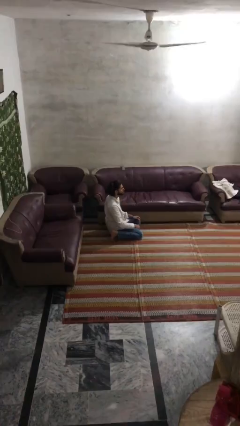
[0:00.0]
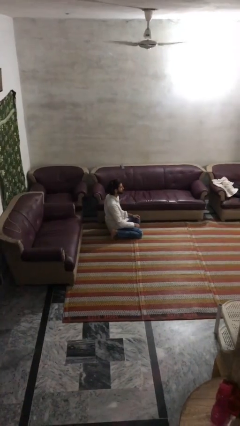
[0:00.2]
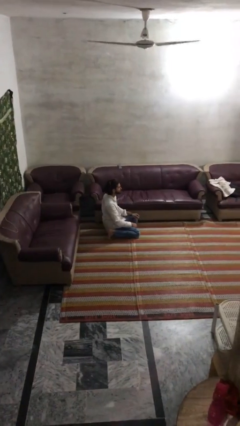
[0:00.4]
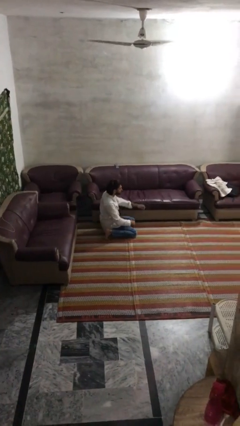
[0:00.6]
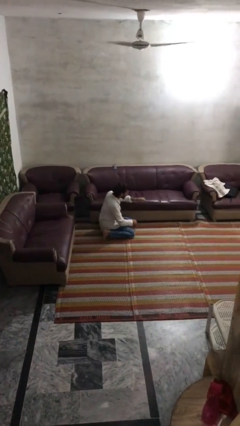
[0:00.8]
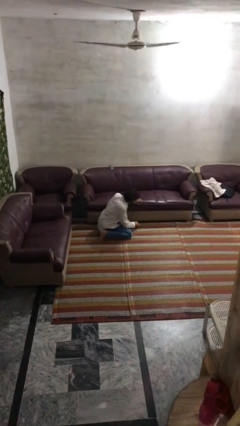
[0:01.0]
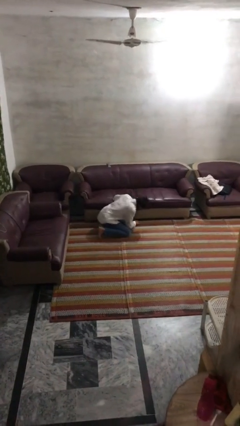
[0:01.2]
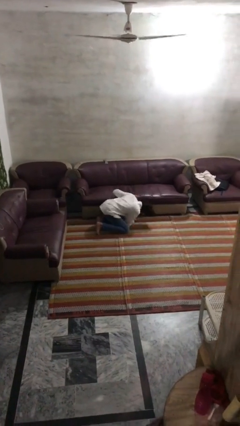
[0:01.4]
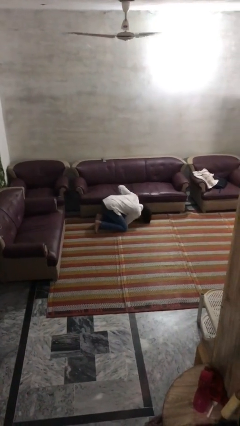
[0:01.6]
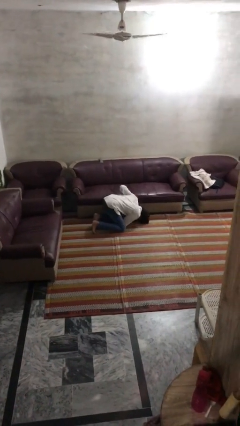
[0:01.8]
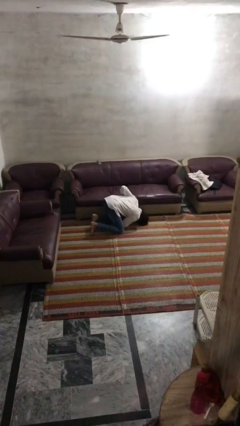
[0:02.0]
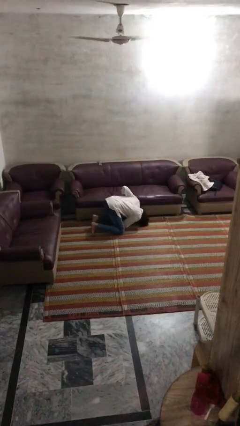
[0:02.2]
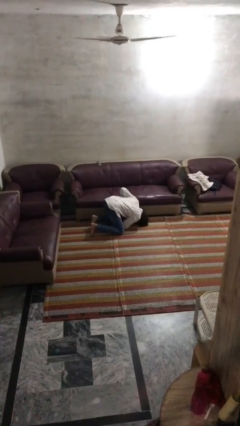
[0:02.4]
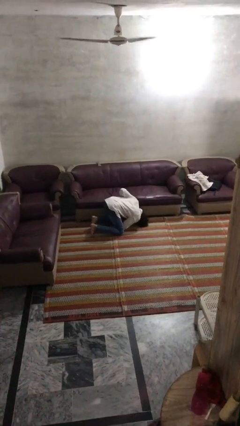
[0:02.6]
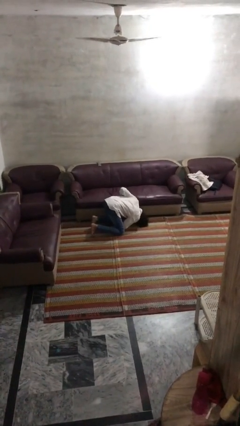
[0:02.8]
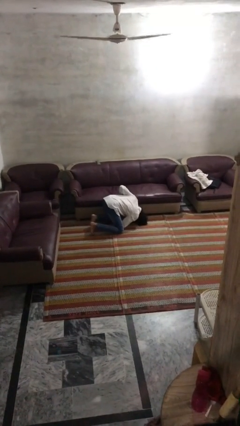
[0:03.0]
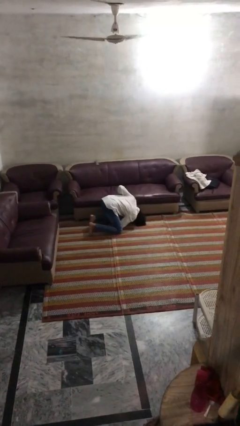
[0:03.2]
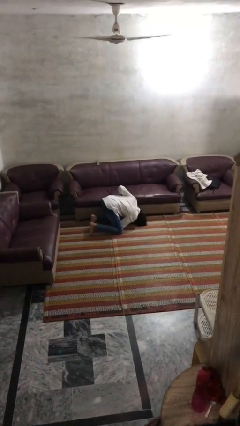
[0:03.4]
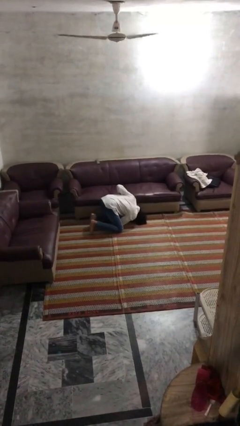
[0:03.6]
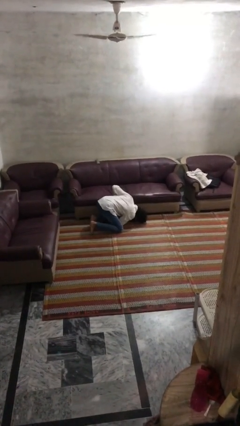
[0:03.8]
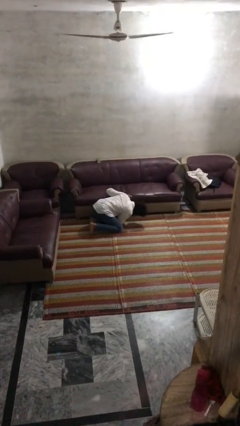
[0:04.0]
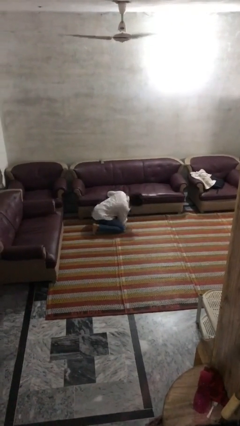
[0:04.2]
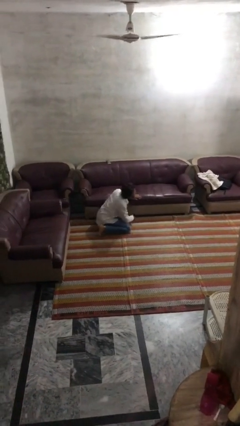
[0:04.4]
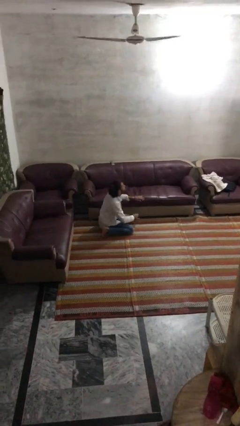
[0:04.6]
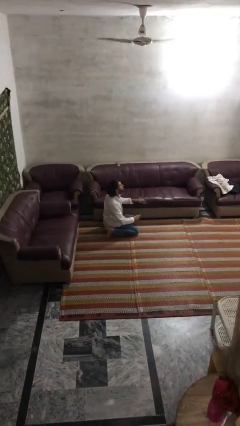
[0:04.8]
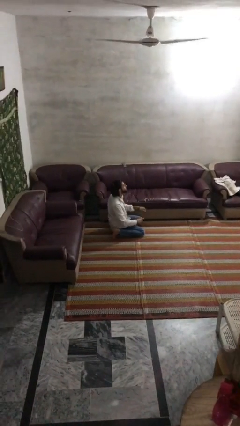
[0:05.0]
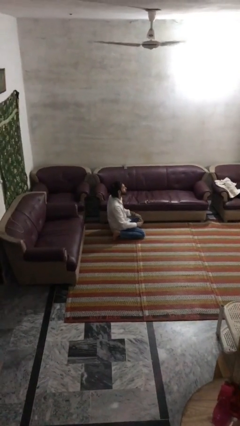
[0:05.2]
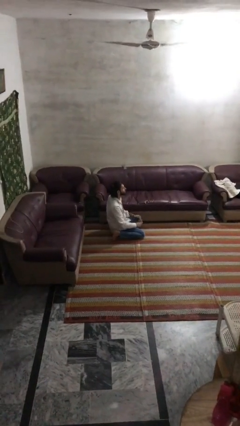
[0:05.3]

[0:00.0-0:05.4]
person searches under couch

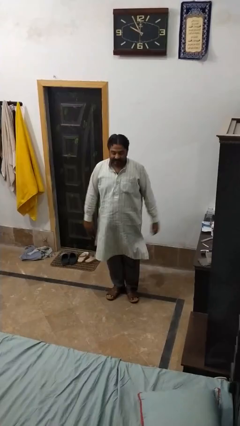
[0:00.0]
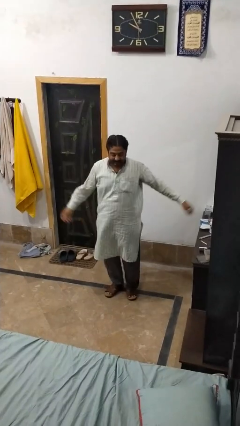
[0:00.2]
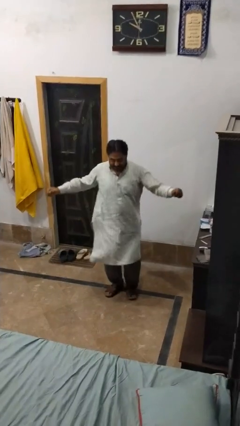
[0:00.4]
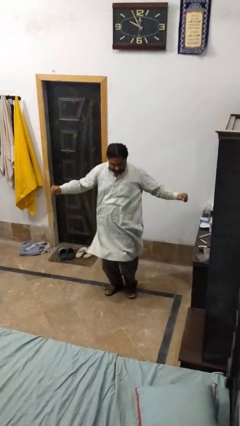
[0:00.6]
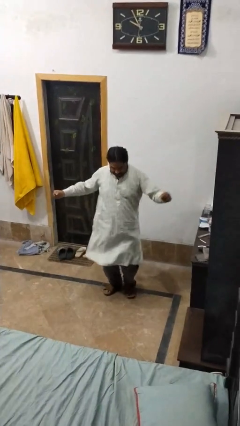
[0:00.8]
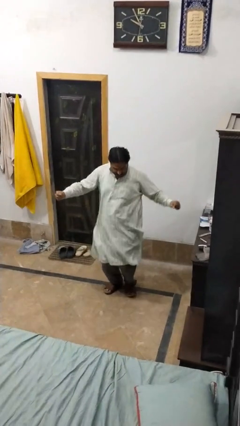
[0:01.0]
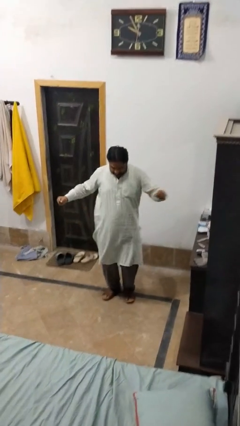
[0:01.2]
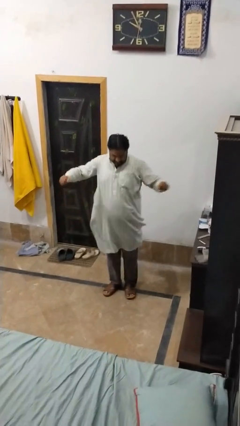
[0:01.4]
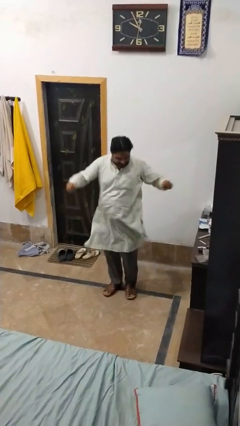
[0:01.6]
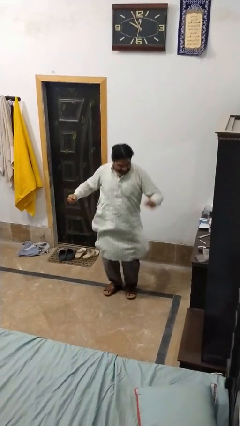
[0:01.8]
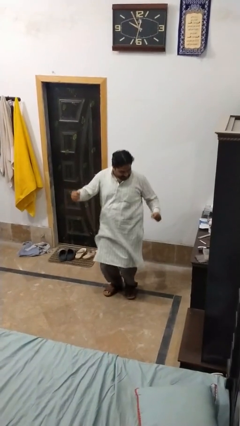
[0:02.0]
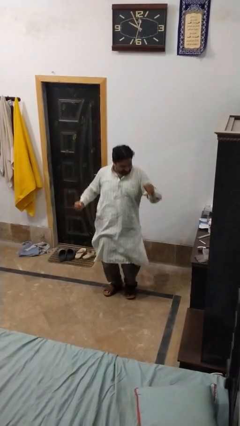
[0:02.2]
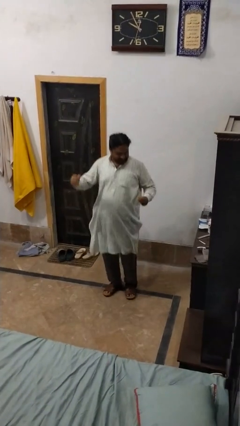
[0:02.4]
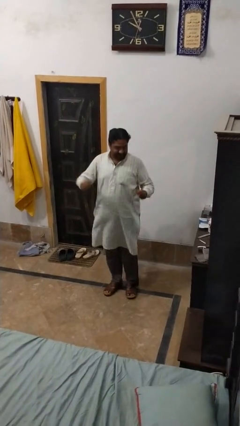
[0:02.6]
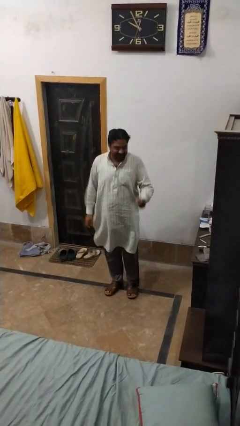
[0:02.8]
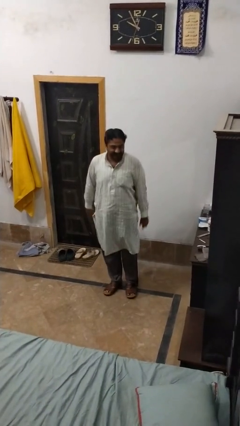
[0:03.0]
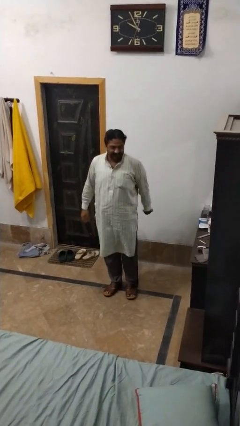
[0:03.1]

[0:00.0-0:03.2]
person dances in place

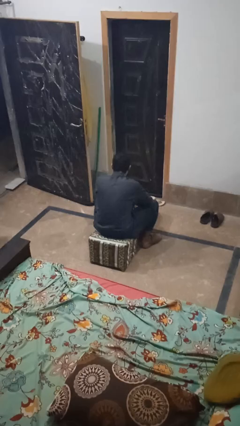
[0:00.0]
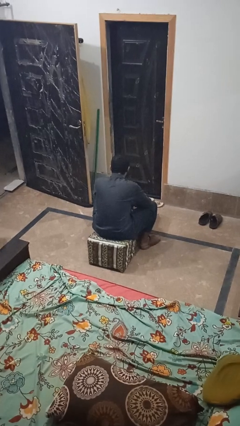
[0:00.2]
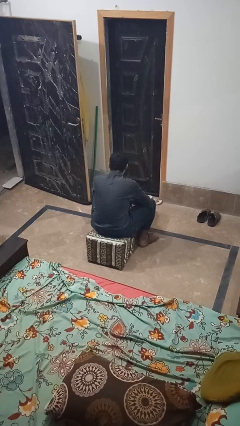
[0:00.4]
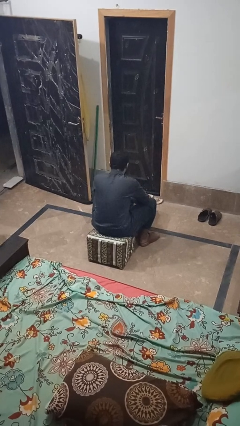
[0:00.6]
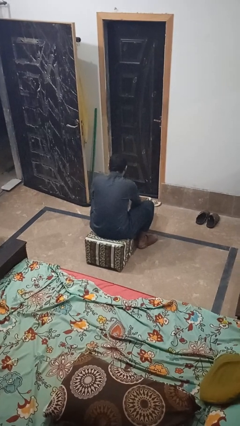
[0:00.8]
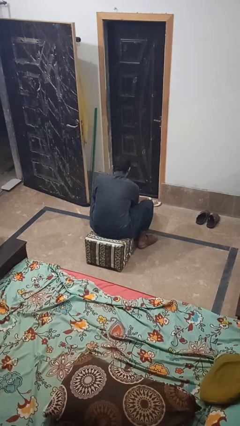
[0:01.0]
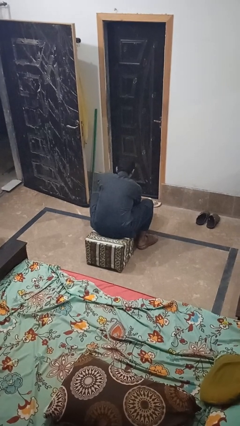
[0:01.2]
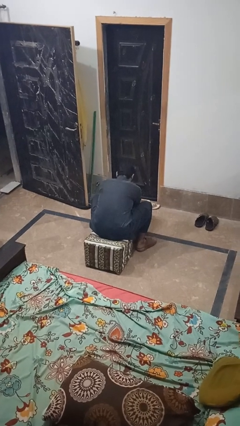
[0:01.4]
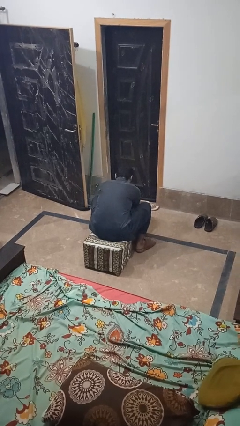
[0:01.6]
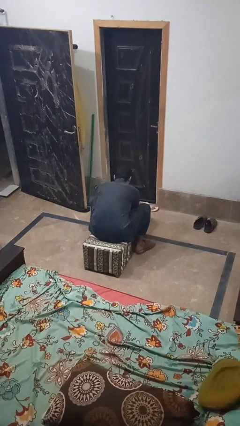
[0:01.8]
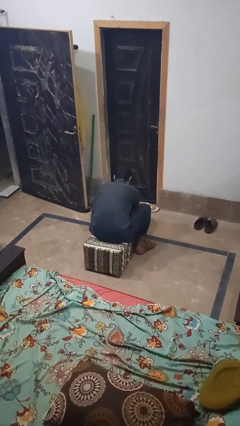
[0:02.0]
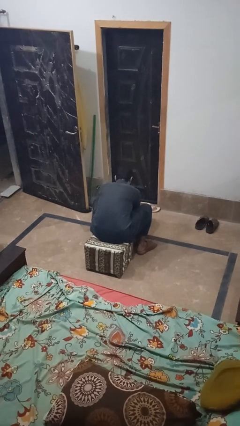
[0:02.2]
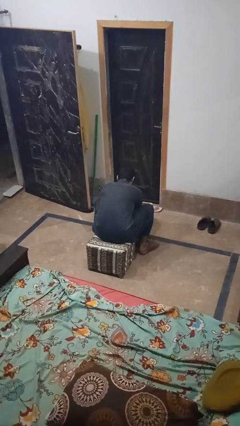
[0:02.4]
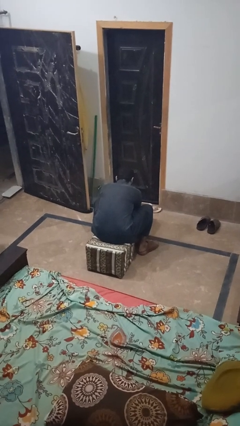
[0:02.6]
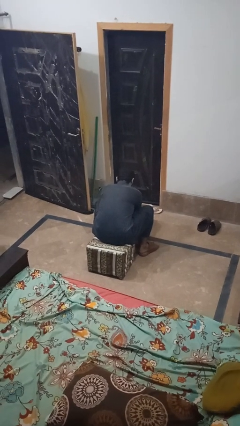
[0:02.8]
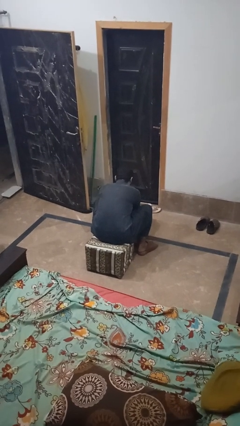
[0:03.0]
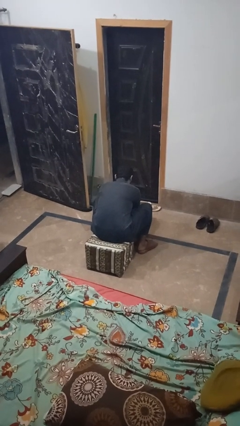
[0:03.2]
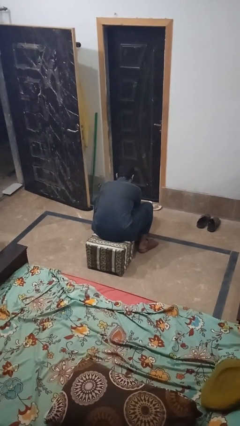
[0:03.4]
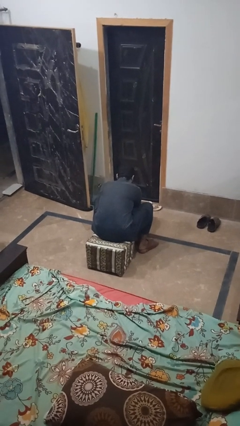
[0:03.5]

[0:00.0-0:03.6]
person searches in box

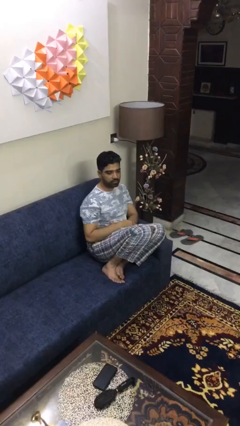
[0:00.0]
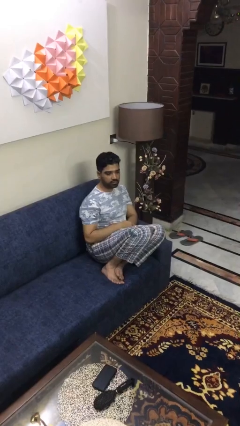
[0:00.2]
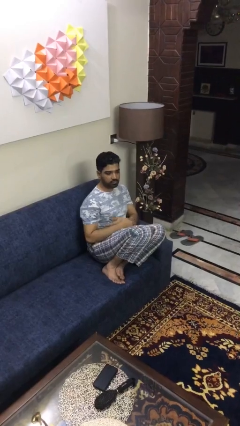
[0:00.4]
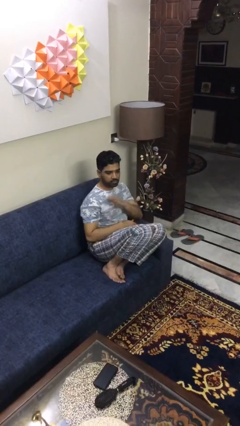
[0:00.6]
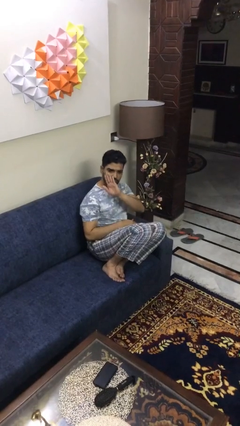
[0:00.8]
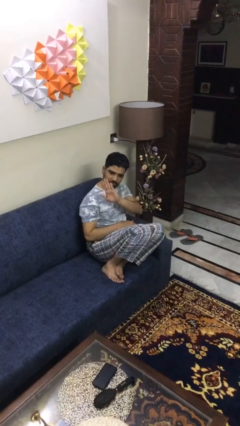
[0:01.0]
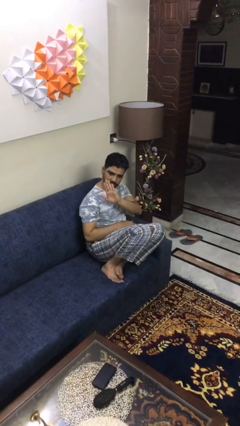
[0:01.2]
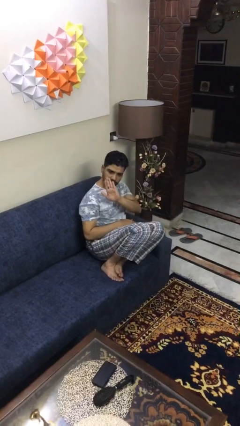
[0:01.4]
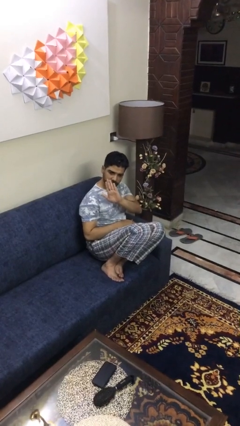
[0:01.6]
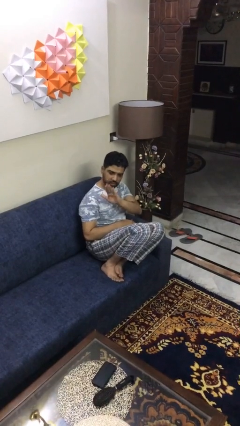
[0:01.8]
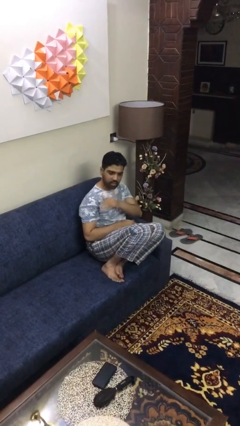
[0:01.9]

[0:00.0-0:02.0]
person gestures stop

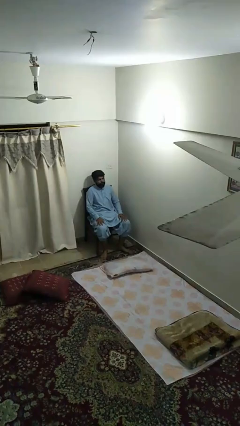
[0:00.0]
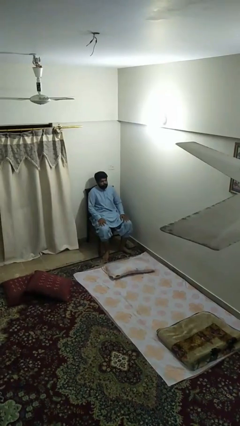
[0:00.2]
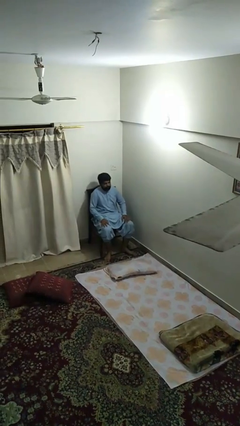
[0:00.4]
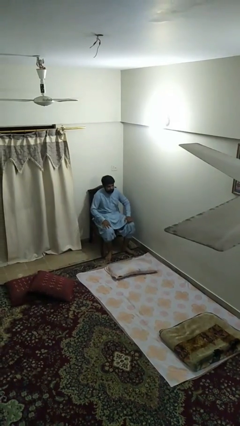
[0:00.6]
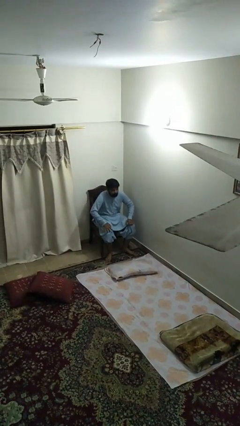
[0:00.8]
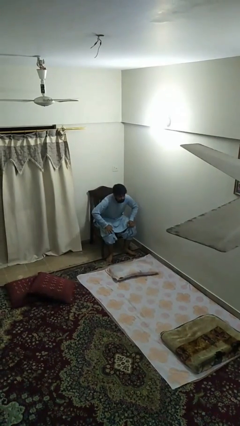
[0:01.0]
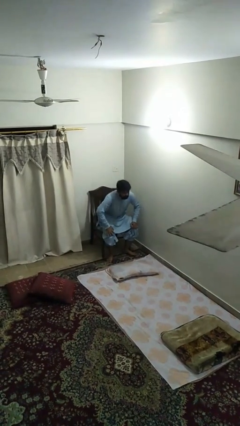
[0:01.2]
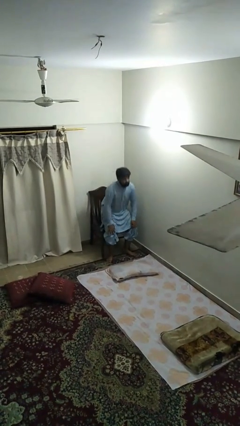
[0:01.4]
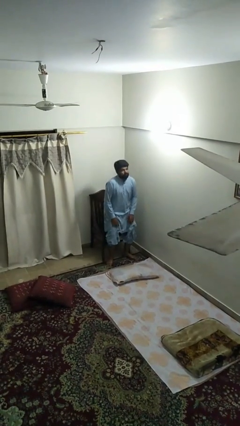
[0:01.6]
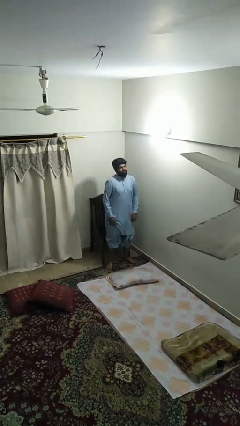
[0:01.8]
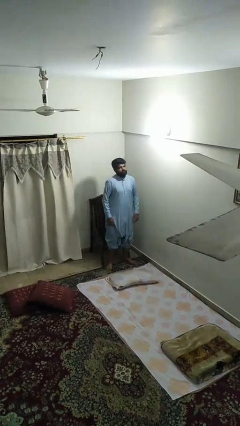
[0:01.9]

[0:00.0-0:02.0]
person stands up

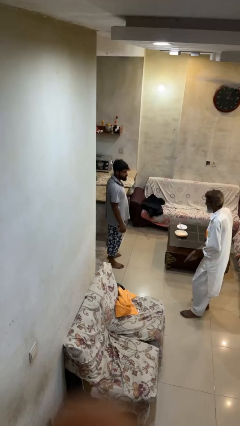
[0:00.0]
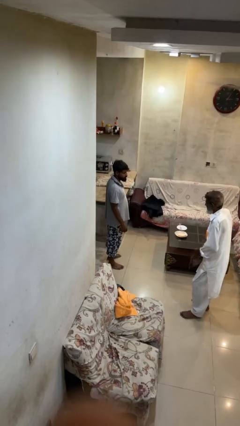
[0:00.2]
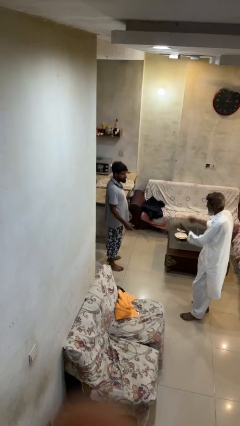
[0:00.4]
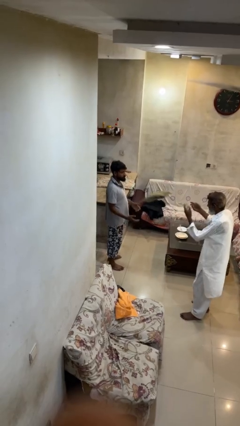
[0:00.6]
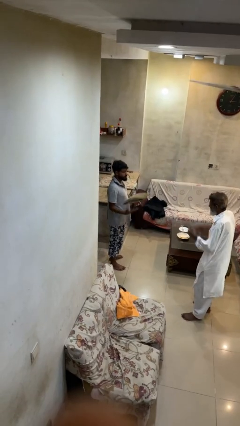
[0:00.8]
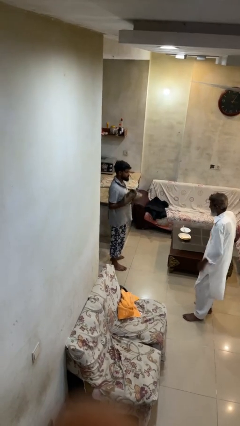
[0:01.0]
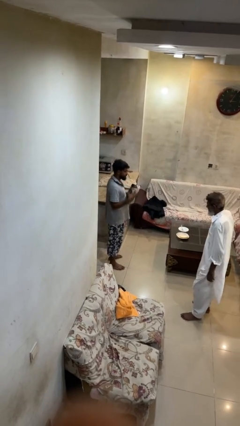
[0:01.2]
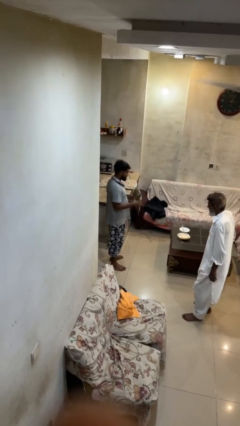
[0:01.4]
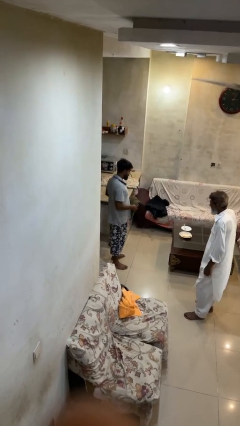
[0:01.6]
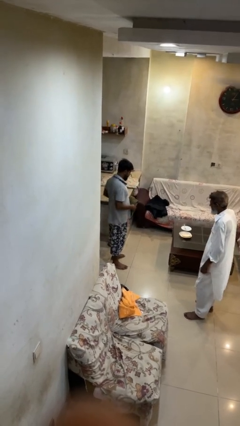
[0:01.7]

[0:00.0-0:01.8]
person catches object from person
